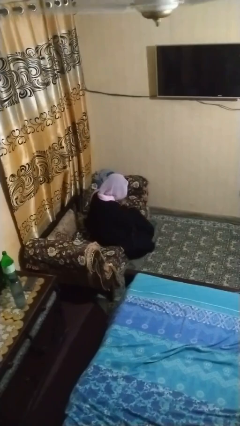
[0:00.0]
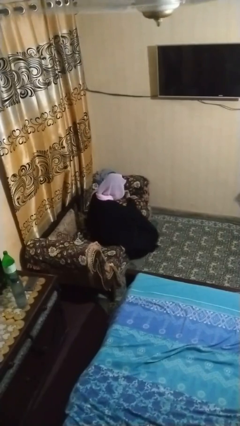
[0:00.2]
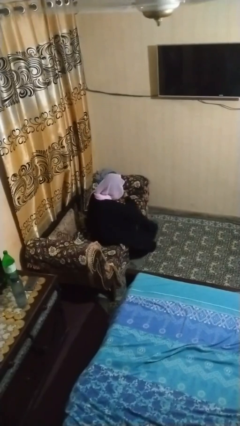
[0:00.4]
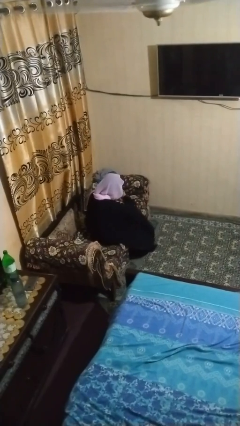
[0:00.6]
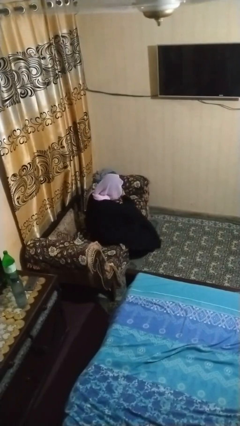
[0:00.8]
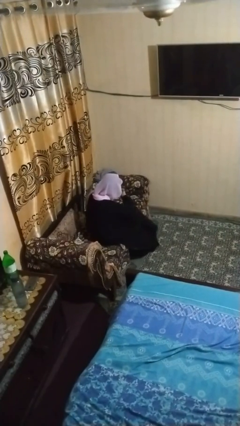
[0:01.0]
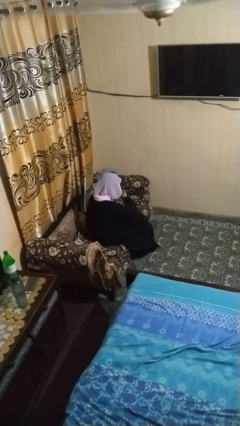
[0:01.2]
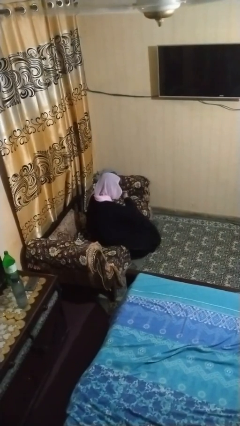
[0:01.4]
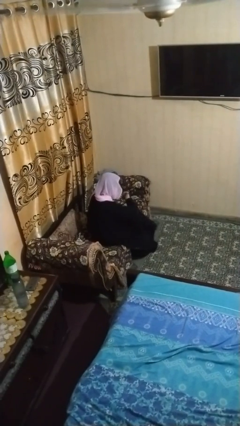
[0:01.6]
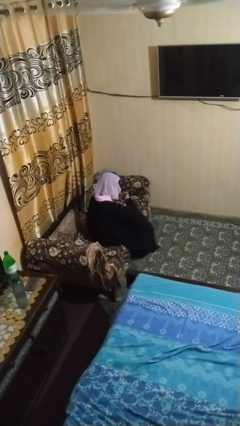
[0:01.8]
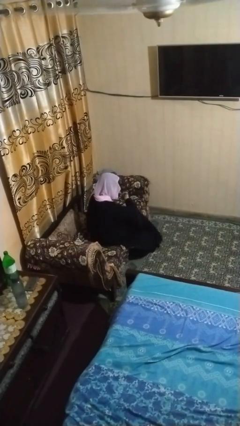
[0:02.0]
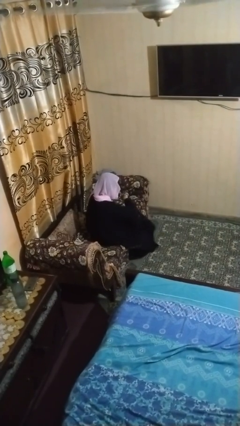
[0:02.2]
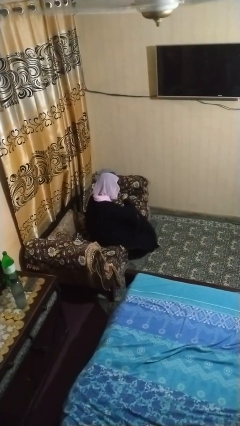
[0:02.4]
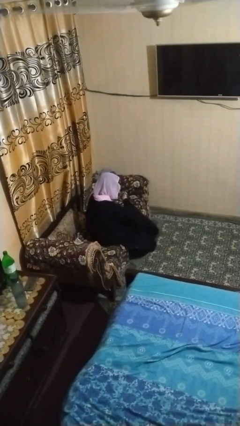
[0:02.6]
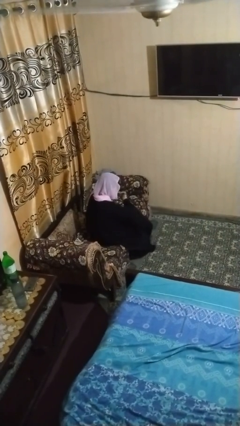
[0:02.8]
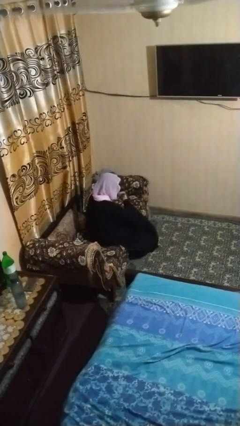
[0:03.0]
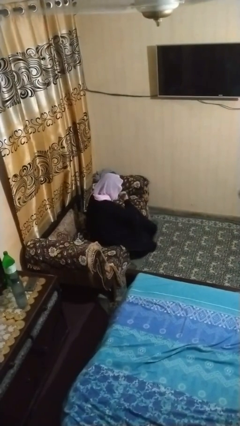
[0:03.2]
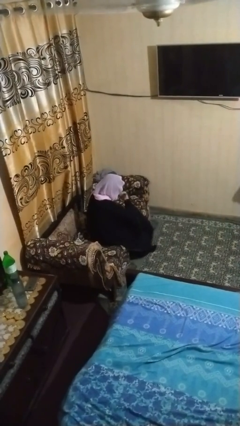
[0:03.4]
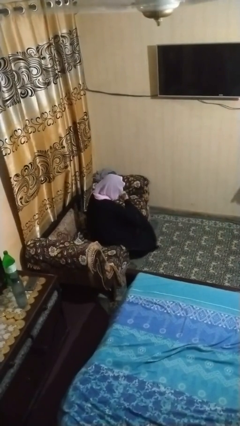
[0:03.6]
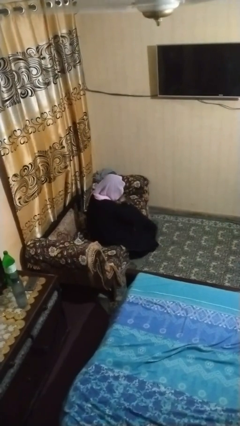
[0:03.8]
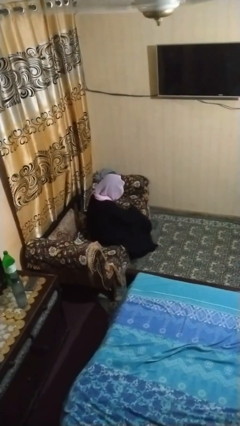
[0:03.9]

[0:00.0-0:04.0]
person looks at wristwatch

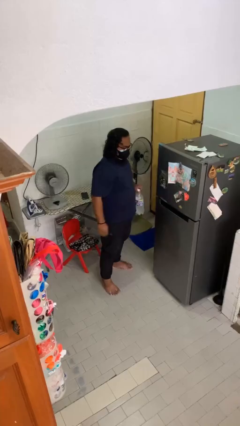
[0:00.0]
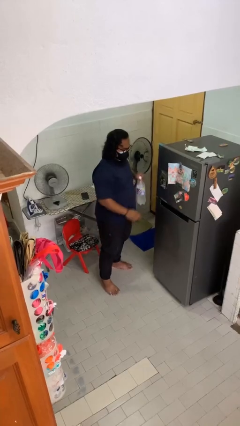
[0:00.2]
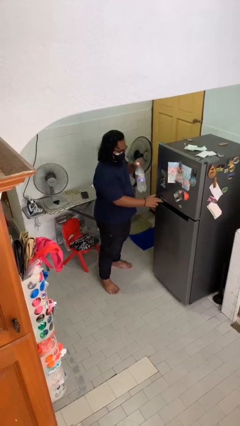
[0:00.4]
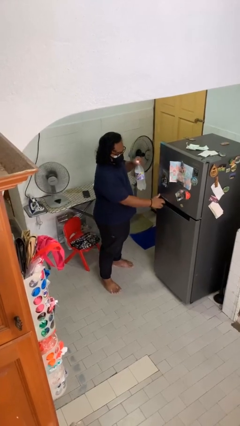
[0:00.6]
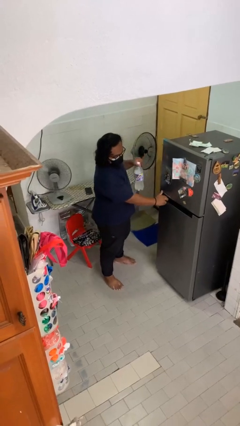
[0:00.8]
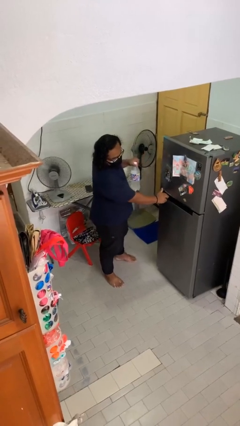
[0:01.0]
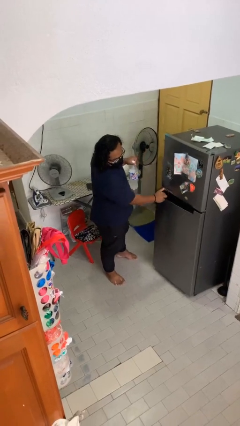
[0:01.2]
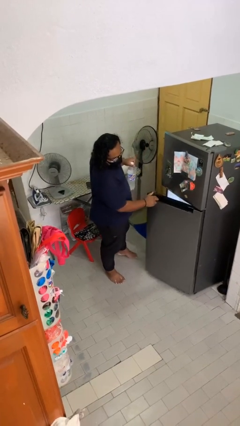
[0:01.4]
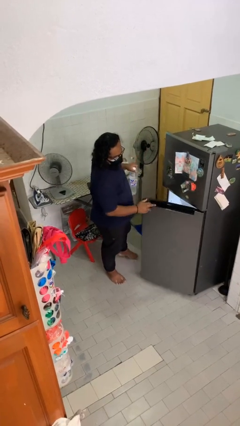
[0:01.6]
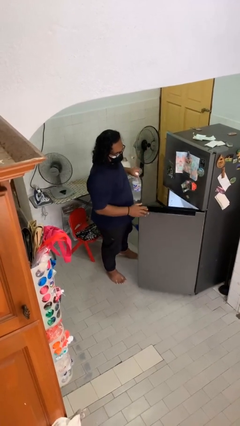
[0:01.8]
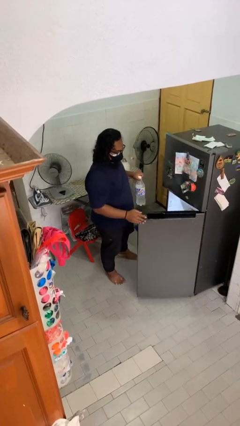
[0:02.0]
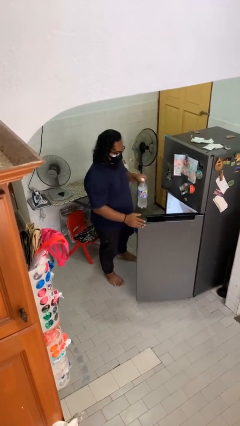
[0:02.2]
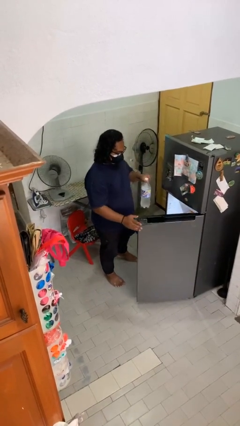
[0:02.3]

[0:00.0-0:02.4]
person opens refrigerator

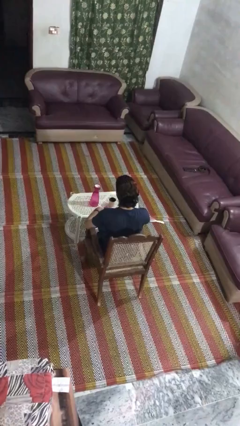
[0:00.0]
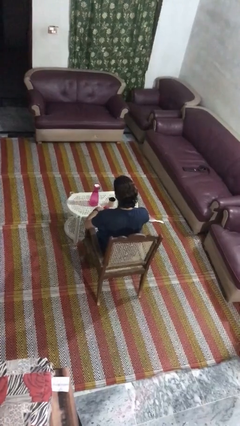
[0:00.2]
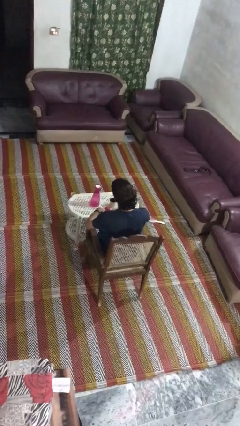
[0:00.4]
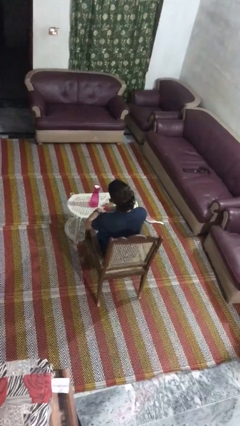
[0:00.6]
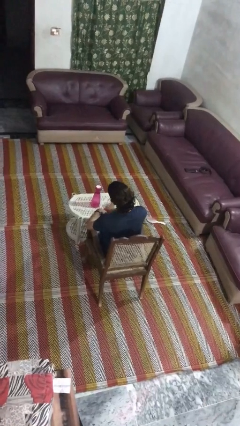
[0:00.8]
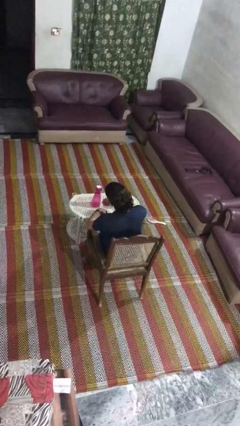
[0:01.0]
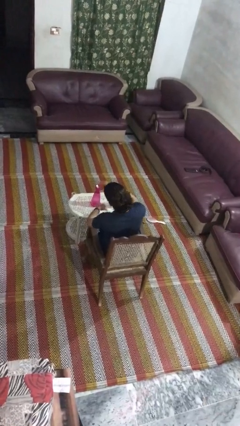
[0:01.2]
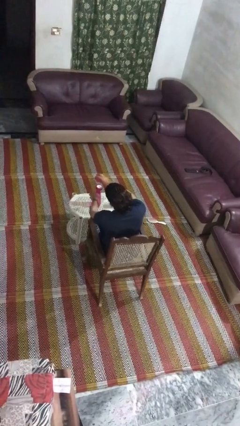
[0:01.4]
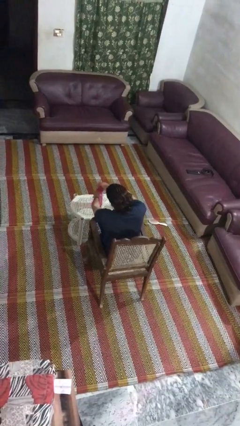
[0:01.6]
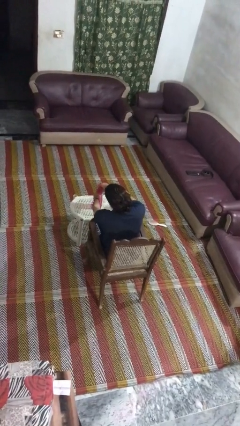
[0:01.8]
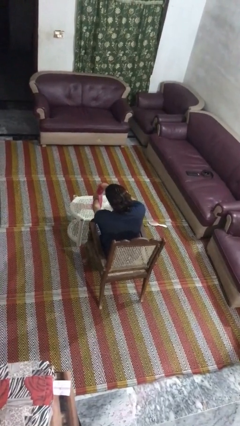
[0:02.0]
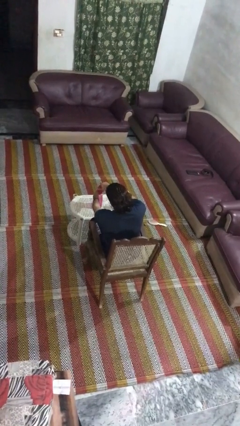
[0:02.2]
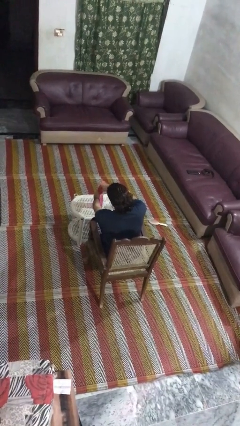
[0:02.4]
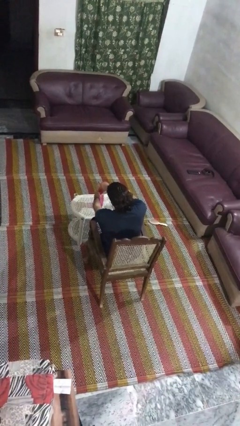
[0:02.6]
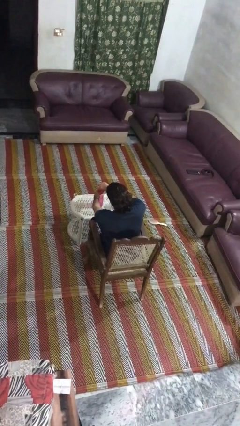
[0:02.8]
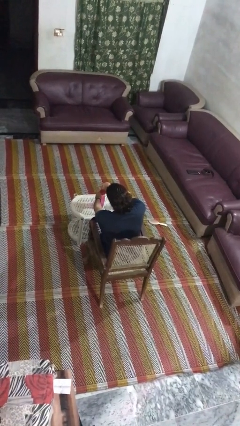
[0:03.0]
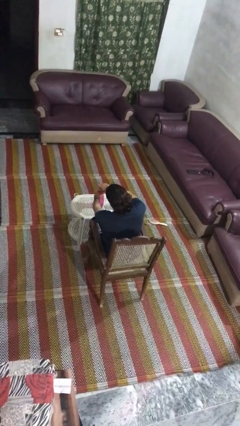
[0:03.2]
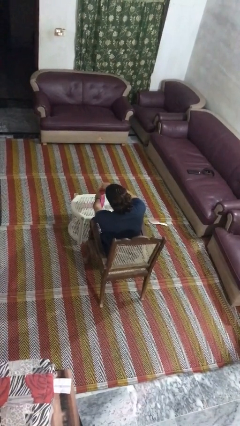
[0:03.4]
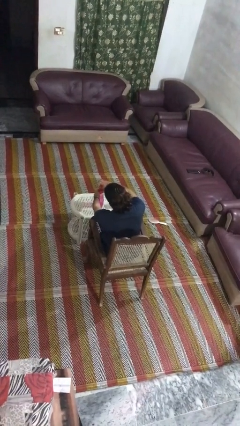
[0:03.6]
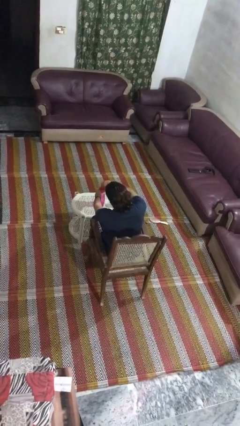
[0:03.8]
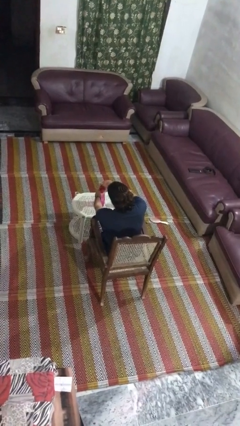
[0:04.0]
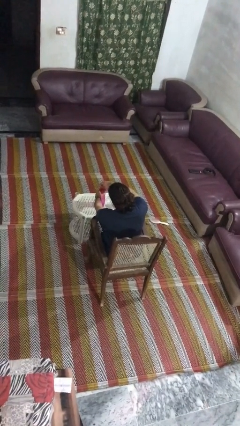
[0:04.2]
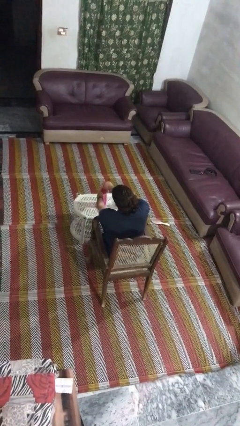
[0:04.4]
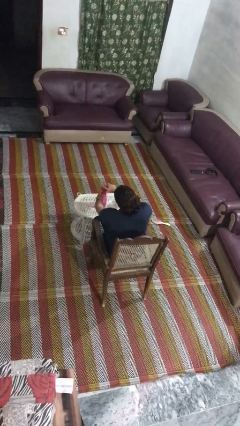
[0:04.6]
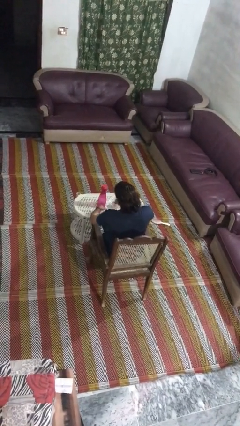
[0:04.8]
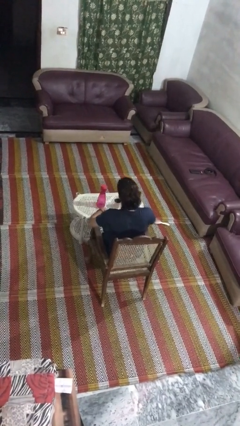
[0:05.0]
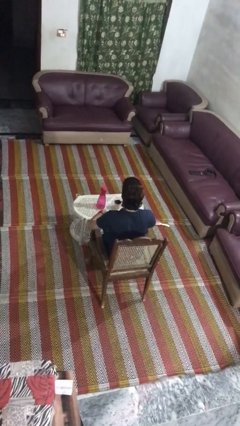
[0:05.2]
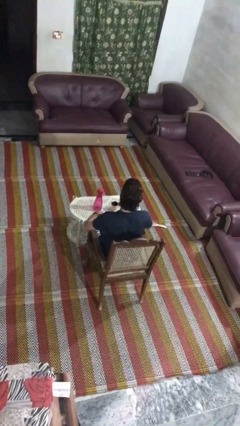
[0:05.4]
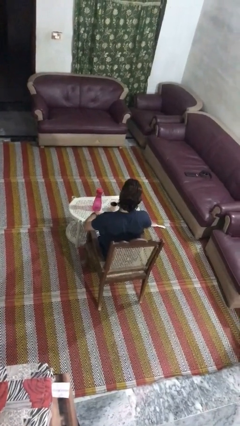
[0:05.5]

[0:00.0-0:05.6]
person screws lid to bottle

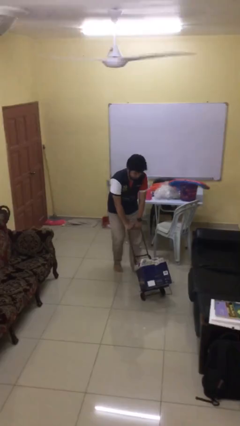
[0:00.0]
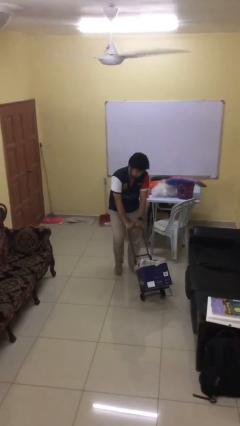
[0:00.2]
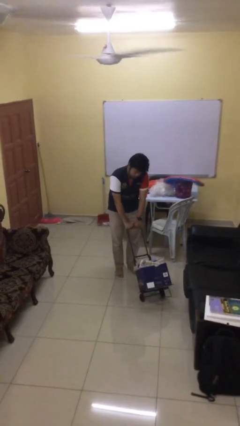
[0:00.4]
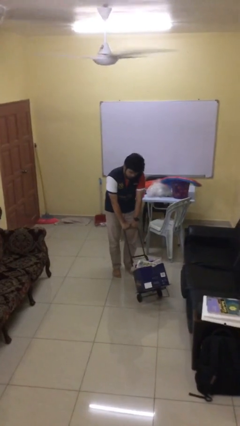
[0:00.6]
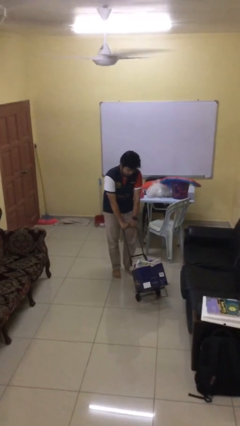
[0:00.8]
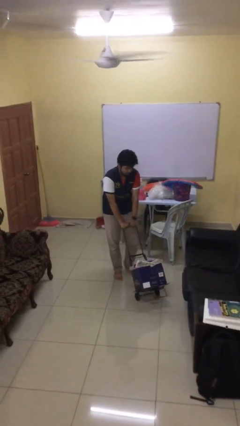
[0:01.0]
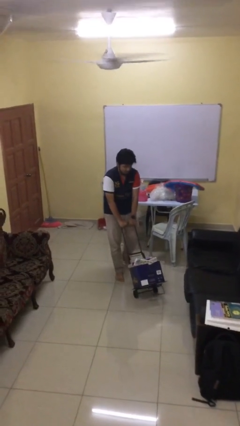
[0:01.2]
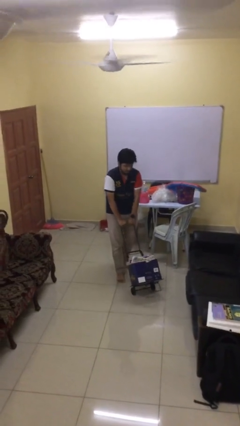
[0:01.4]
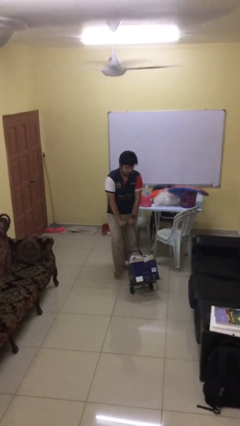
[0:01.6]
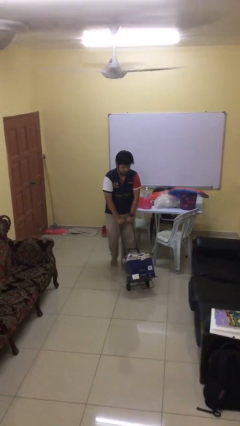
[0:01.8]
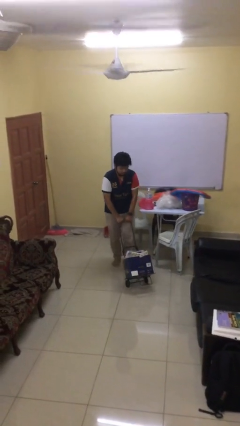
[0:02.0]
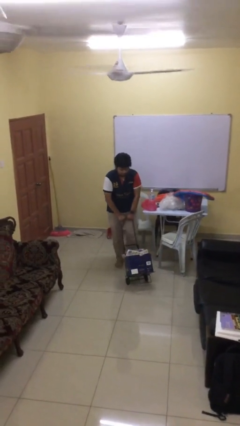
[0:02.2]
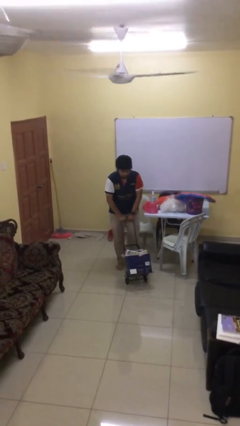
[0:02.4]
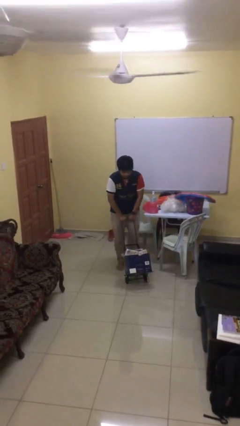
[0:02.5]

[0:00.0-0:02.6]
person pulls wheeled cart

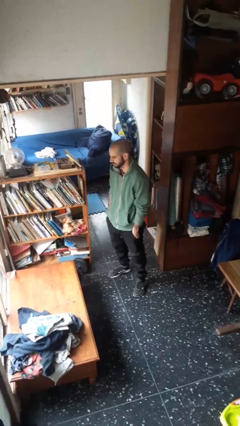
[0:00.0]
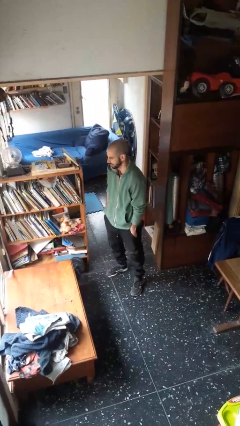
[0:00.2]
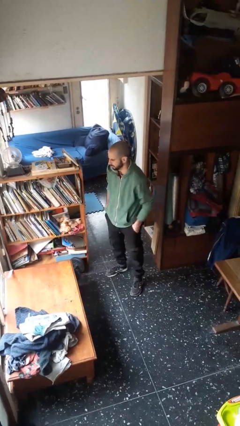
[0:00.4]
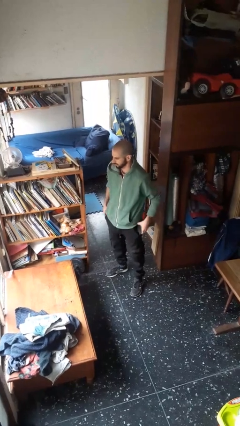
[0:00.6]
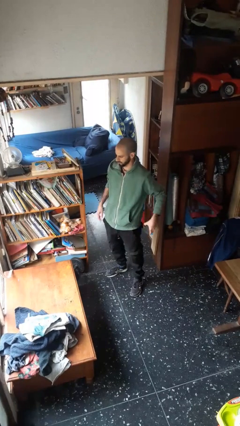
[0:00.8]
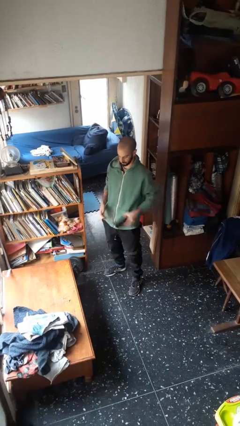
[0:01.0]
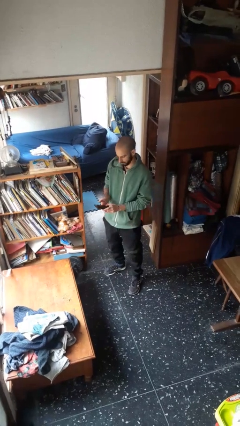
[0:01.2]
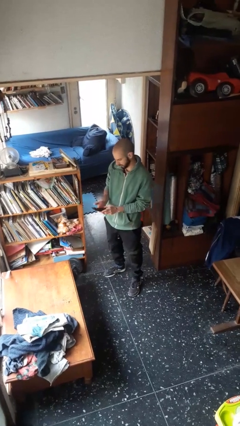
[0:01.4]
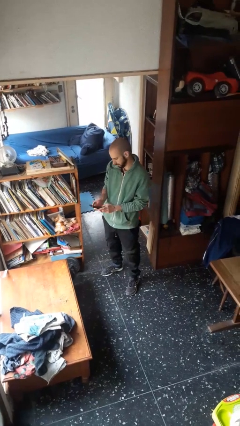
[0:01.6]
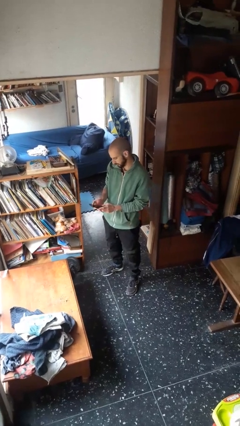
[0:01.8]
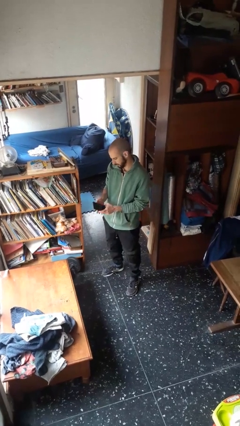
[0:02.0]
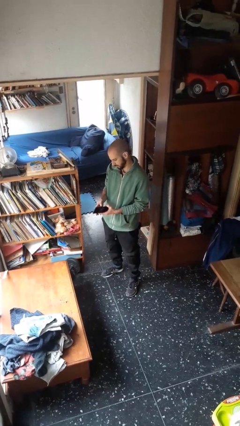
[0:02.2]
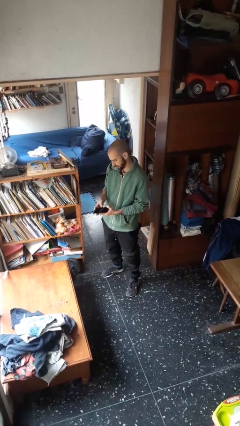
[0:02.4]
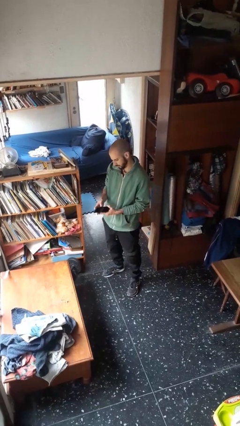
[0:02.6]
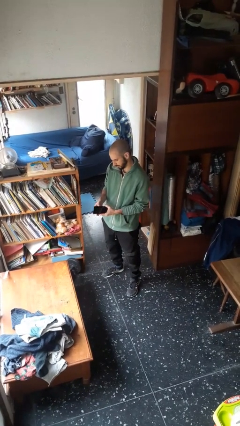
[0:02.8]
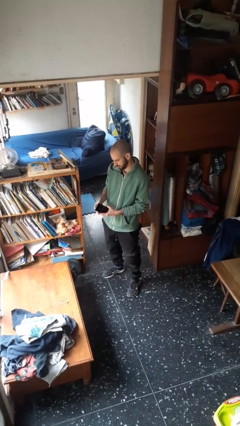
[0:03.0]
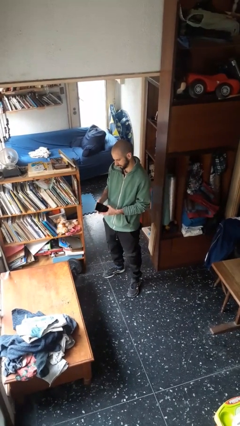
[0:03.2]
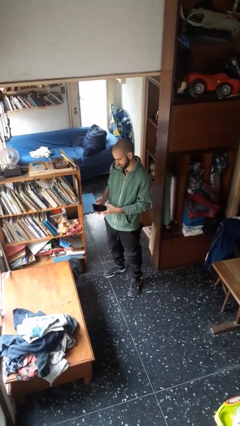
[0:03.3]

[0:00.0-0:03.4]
person takes phone from pocket
